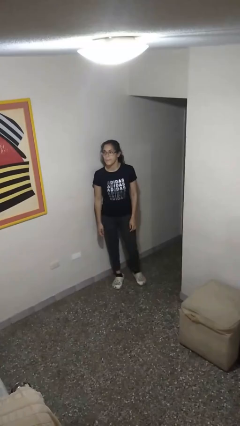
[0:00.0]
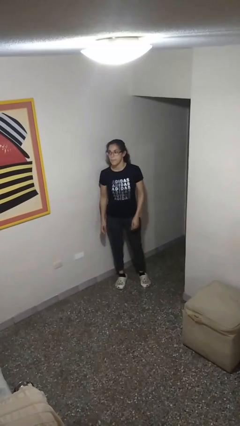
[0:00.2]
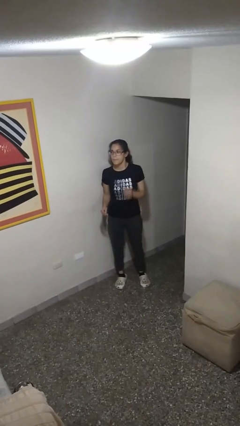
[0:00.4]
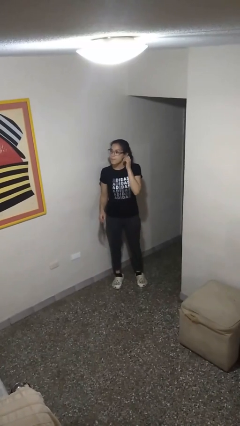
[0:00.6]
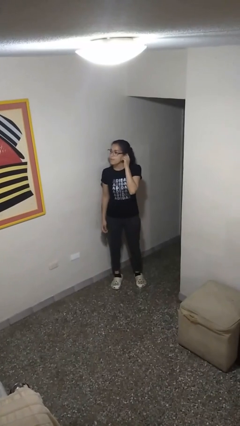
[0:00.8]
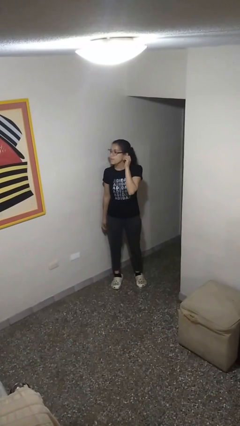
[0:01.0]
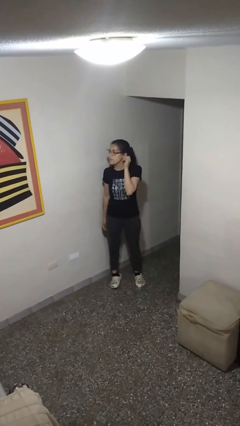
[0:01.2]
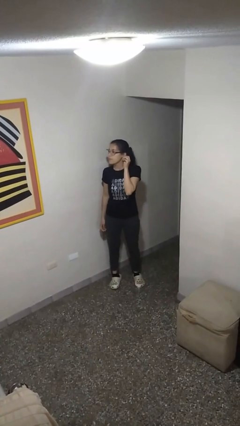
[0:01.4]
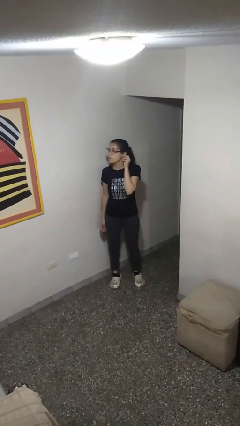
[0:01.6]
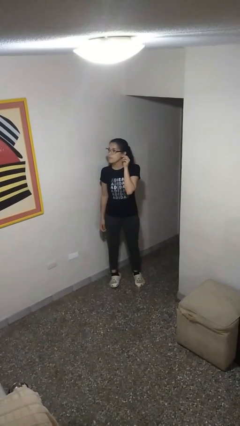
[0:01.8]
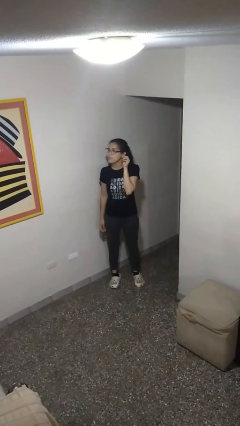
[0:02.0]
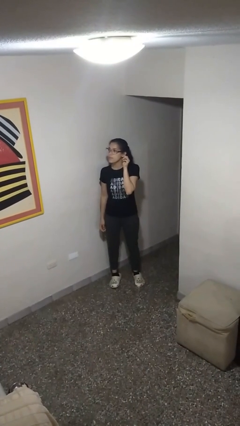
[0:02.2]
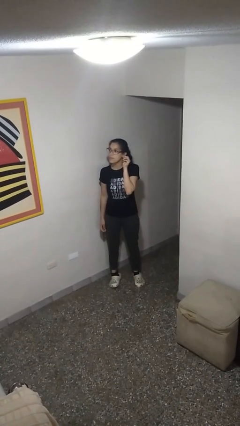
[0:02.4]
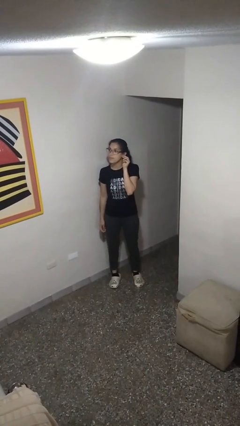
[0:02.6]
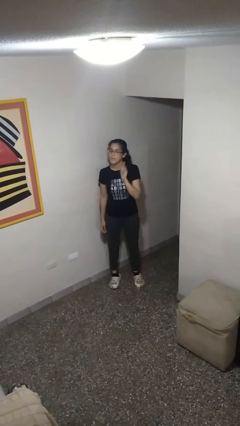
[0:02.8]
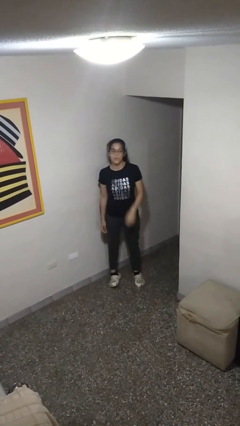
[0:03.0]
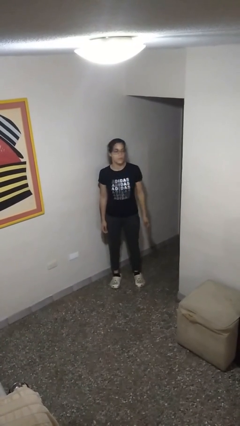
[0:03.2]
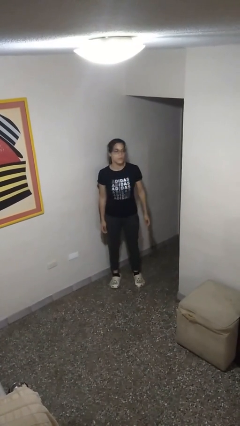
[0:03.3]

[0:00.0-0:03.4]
person touches earlobe

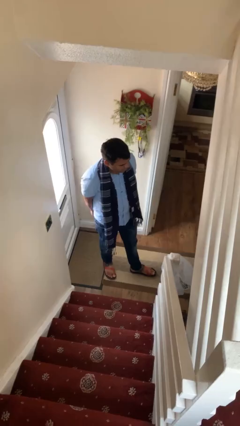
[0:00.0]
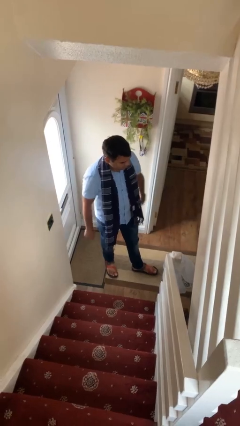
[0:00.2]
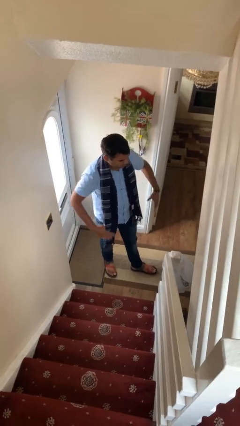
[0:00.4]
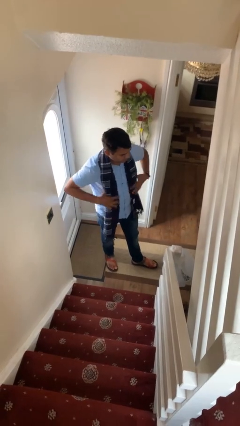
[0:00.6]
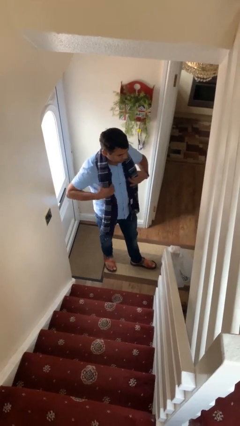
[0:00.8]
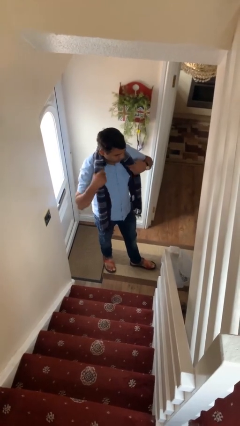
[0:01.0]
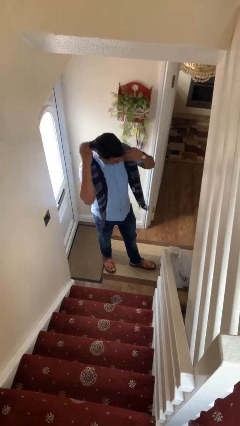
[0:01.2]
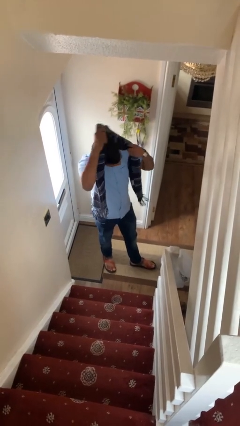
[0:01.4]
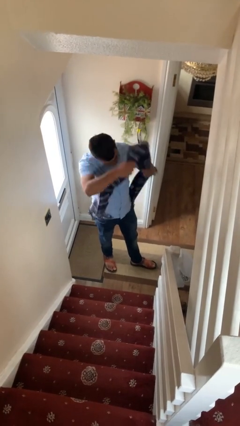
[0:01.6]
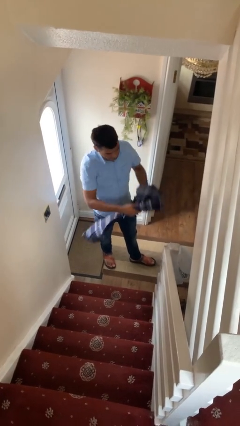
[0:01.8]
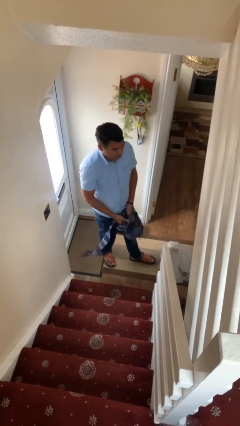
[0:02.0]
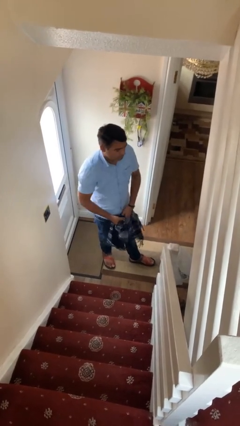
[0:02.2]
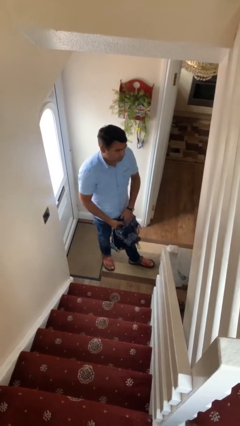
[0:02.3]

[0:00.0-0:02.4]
person takes off scarf

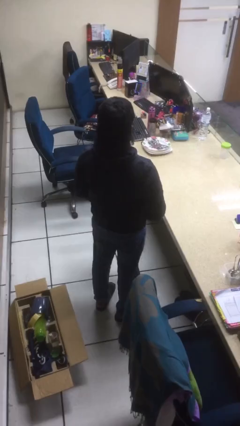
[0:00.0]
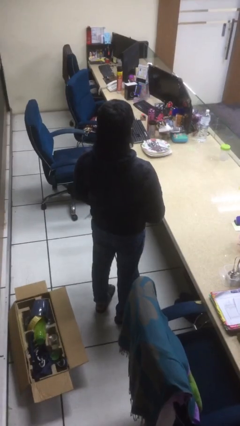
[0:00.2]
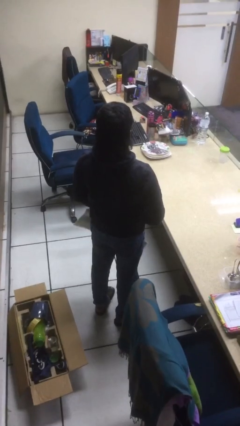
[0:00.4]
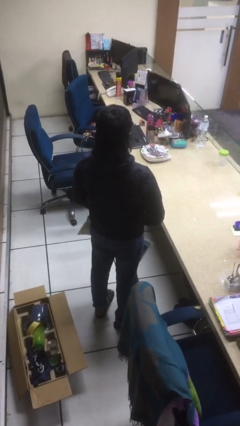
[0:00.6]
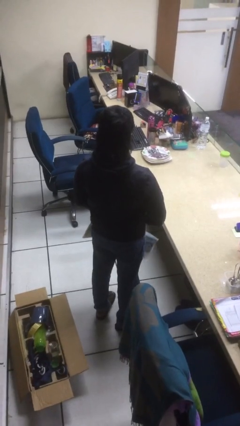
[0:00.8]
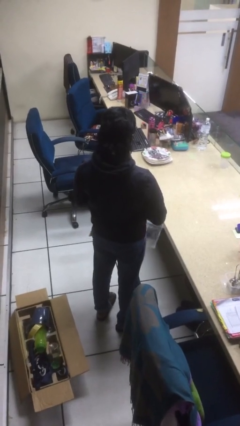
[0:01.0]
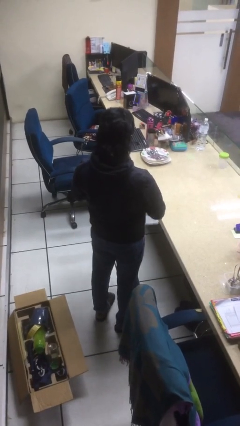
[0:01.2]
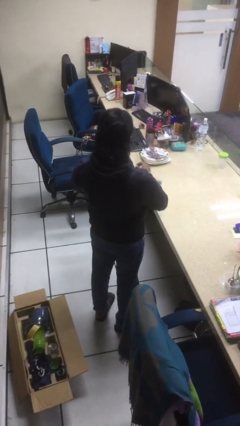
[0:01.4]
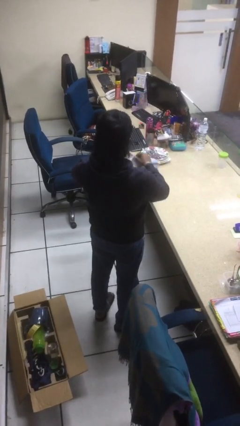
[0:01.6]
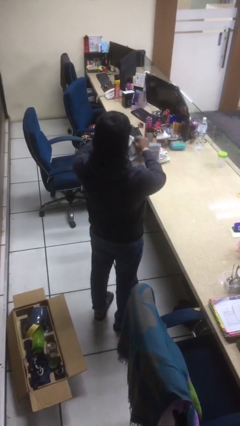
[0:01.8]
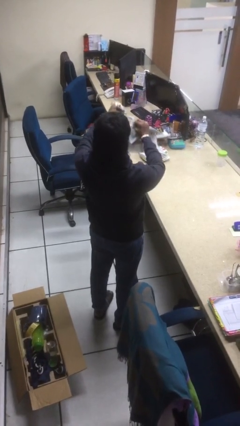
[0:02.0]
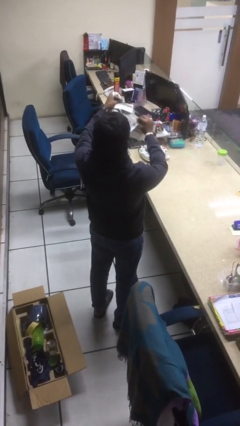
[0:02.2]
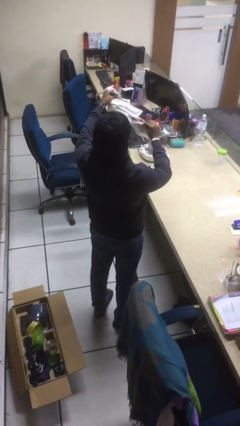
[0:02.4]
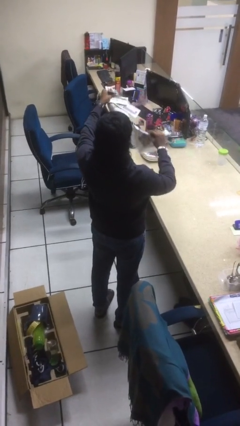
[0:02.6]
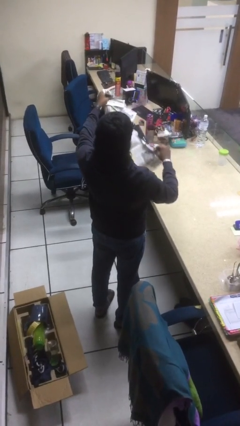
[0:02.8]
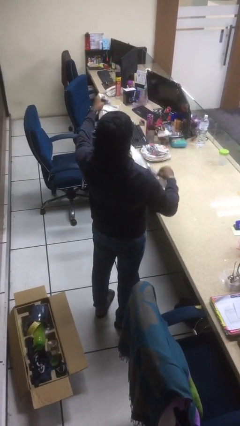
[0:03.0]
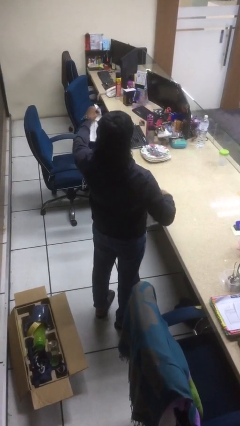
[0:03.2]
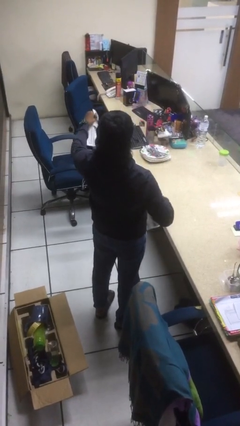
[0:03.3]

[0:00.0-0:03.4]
person tears paper

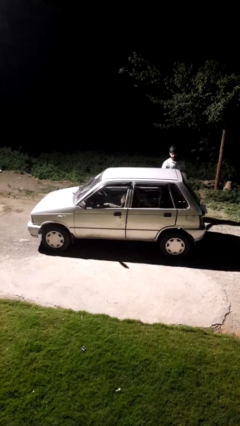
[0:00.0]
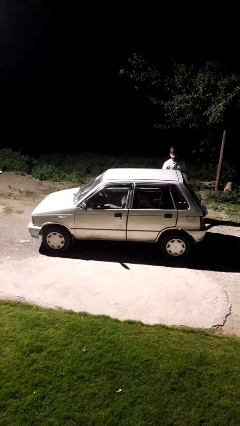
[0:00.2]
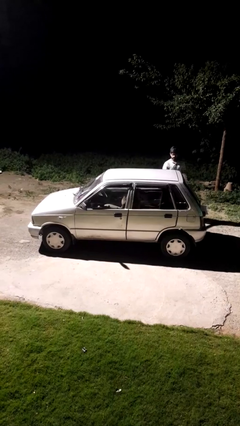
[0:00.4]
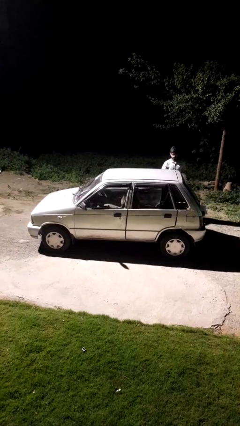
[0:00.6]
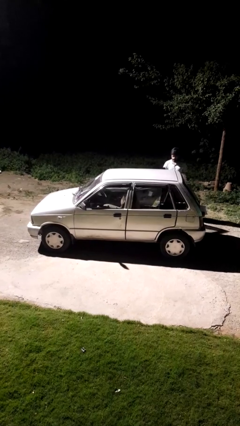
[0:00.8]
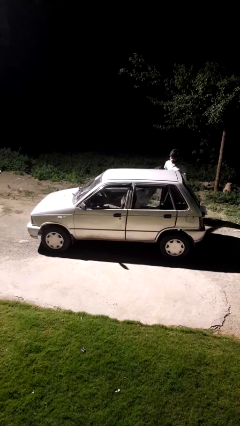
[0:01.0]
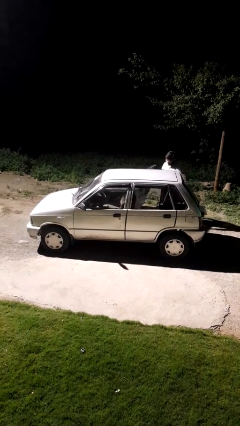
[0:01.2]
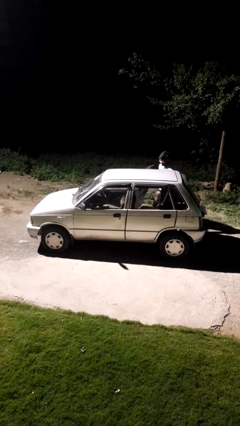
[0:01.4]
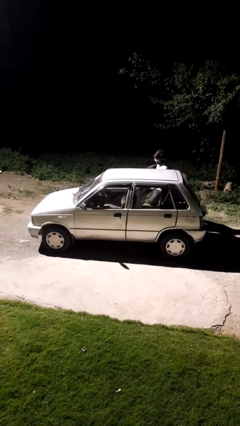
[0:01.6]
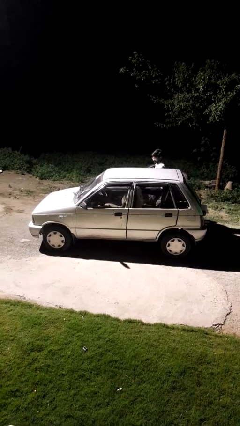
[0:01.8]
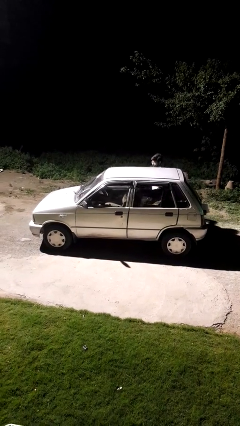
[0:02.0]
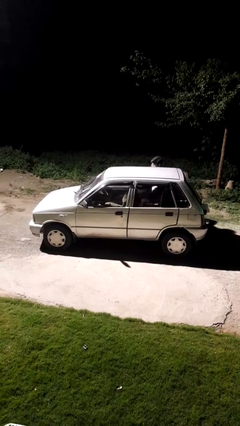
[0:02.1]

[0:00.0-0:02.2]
car picks up person

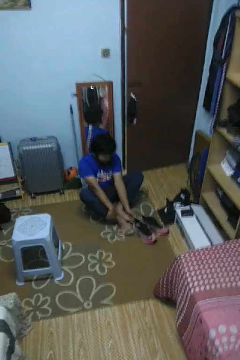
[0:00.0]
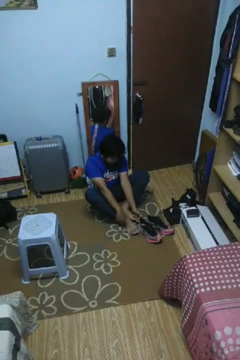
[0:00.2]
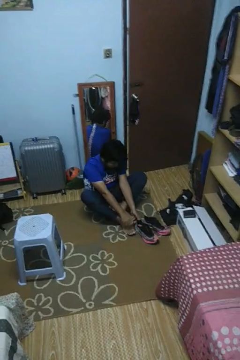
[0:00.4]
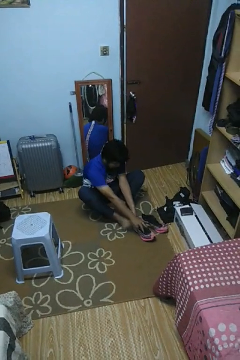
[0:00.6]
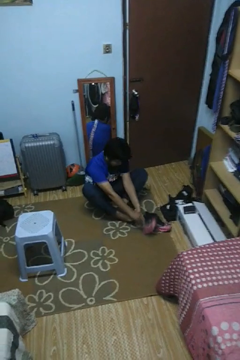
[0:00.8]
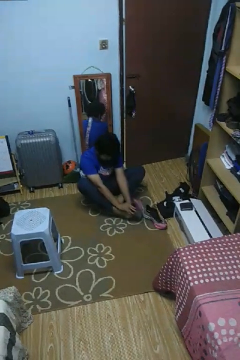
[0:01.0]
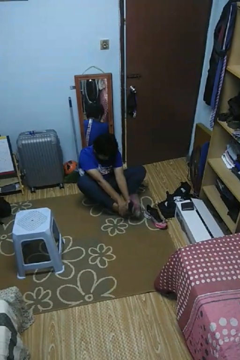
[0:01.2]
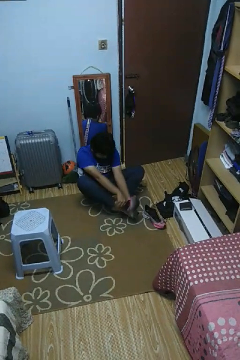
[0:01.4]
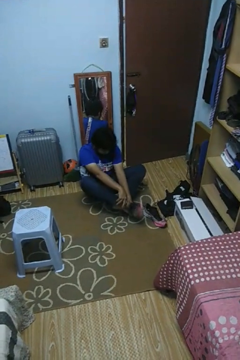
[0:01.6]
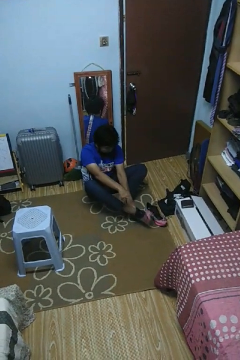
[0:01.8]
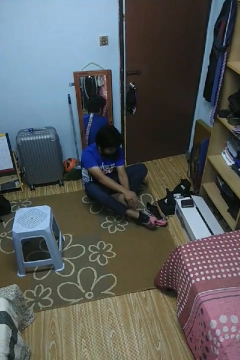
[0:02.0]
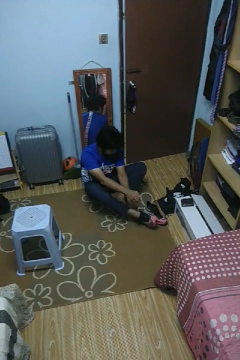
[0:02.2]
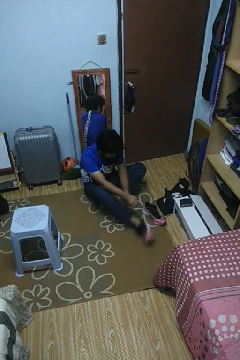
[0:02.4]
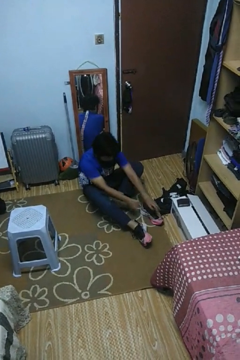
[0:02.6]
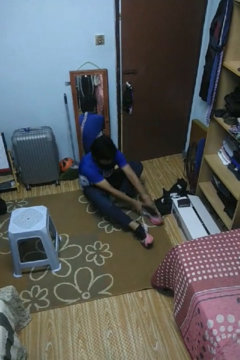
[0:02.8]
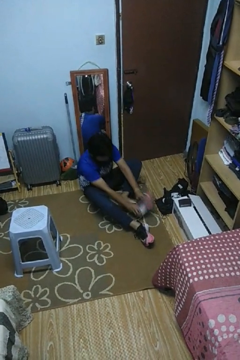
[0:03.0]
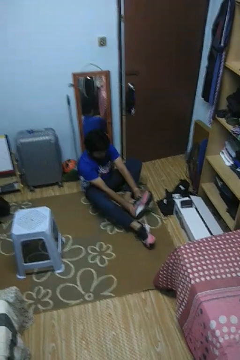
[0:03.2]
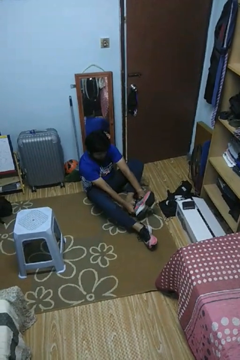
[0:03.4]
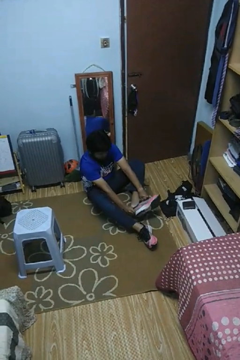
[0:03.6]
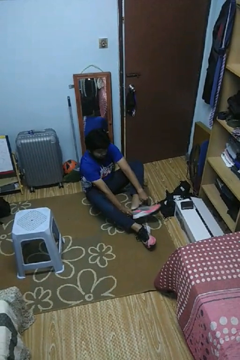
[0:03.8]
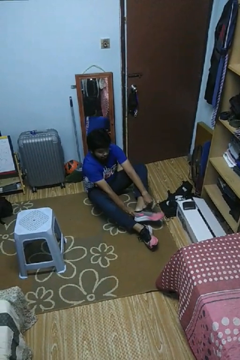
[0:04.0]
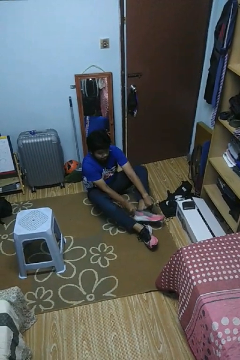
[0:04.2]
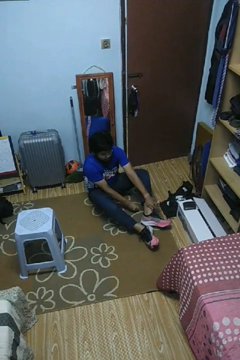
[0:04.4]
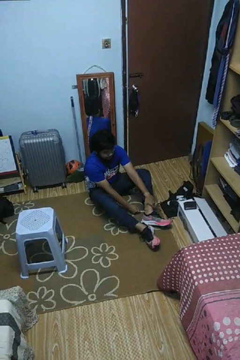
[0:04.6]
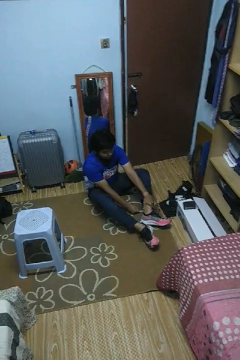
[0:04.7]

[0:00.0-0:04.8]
person puts on shoes

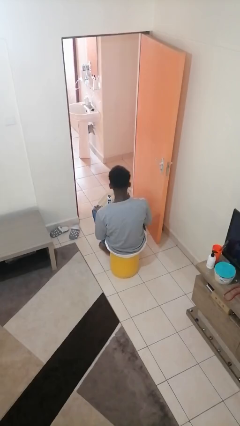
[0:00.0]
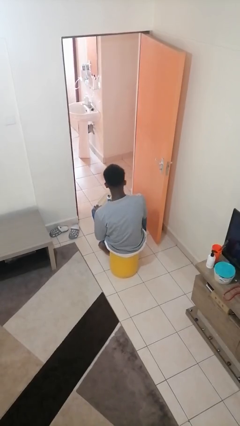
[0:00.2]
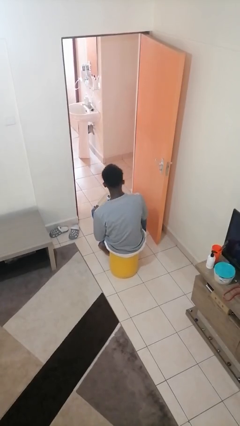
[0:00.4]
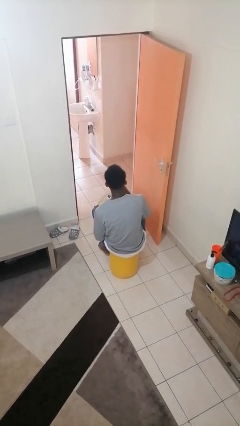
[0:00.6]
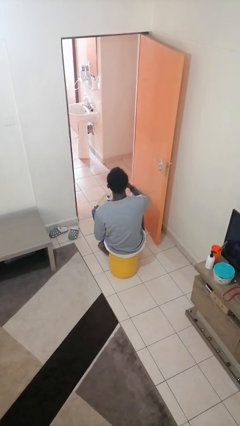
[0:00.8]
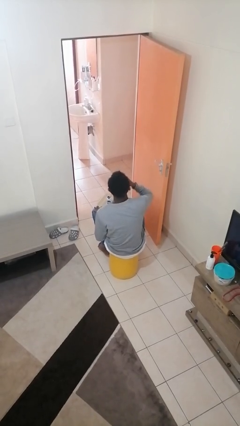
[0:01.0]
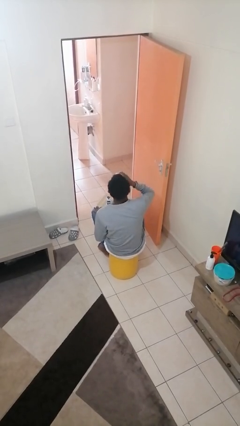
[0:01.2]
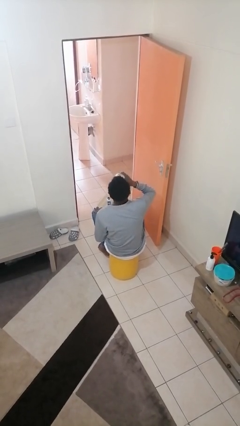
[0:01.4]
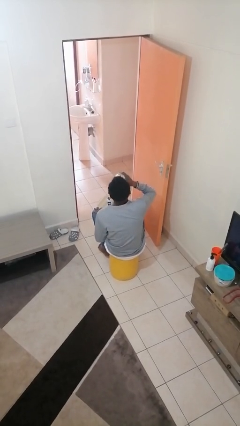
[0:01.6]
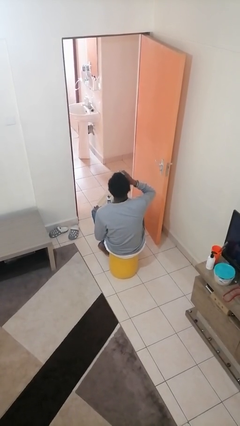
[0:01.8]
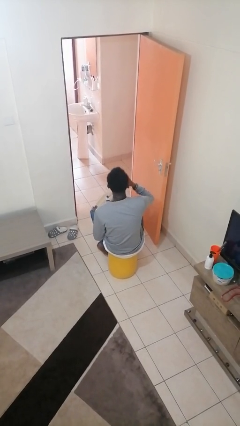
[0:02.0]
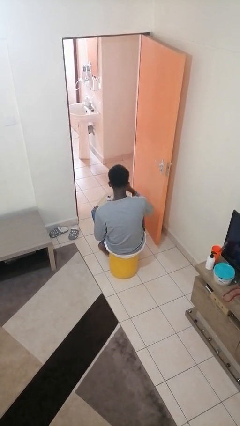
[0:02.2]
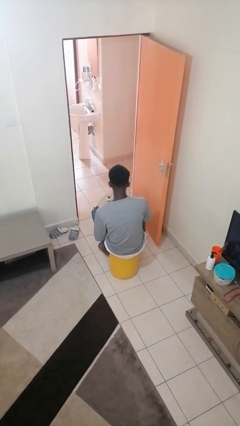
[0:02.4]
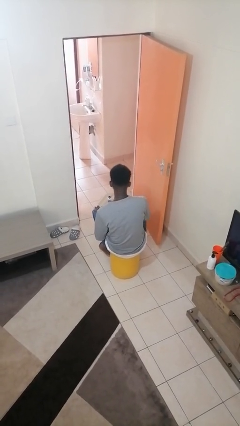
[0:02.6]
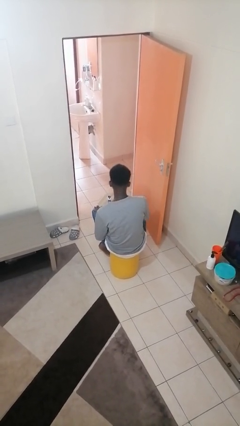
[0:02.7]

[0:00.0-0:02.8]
person drinks from cup
